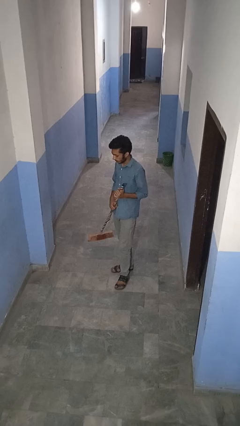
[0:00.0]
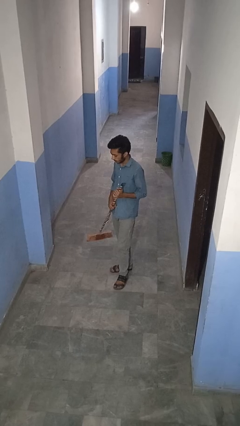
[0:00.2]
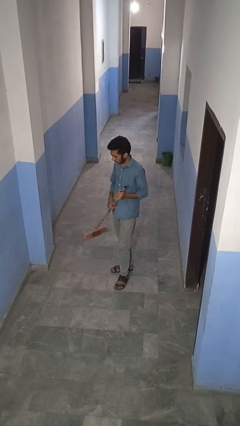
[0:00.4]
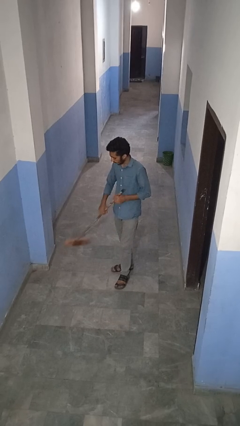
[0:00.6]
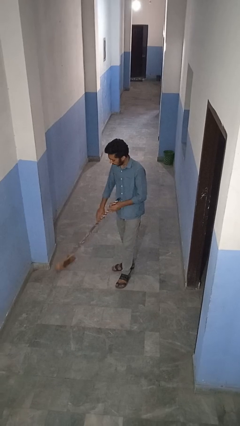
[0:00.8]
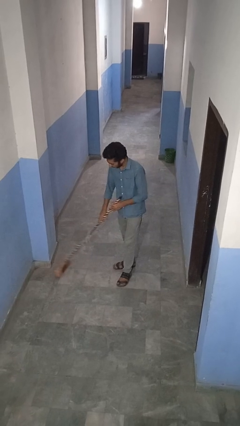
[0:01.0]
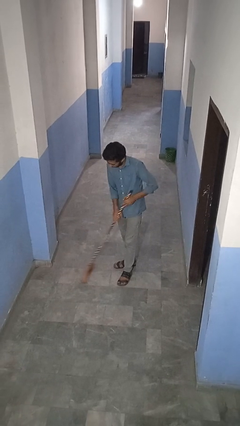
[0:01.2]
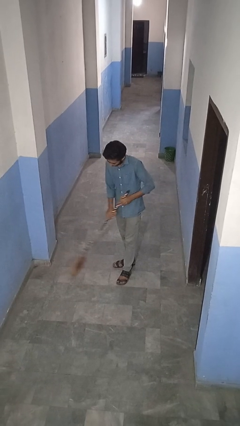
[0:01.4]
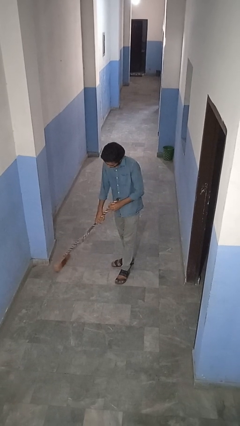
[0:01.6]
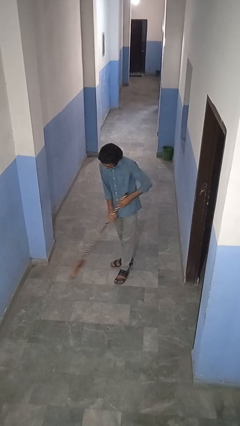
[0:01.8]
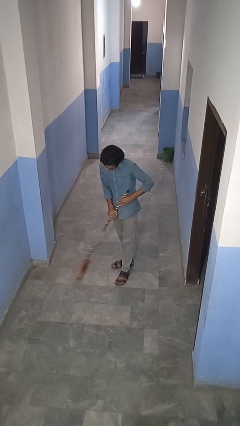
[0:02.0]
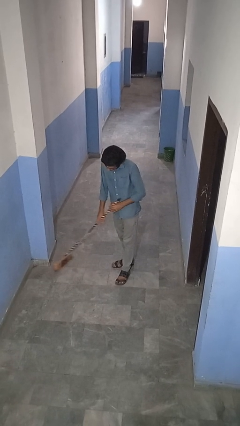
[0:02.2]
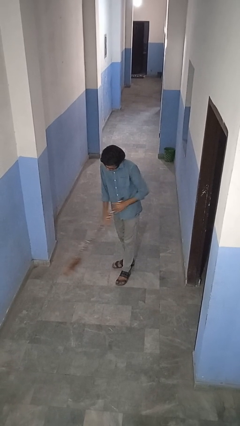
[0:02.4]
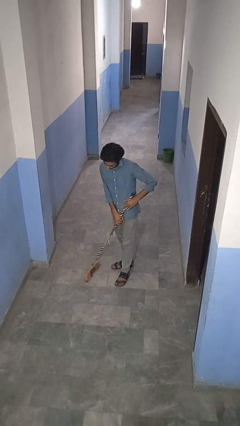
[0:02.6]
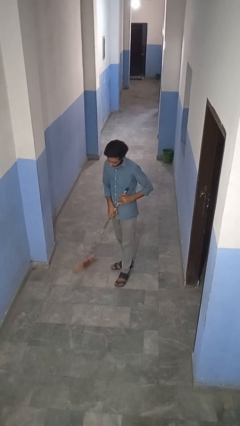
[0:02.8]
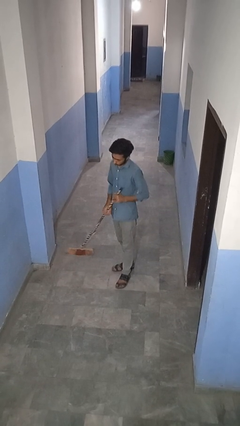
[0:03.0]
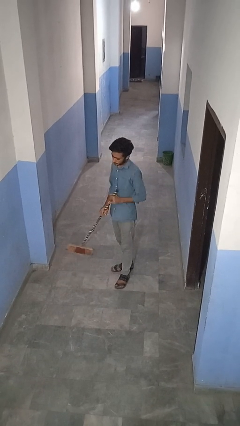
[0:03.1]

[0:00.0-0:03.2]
person sweeps floor

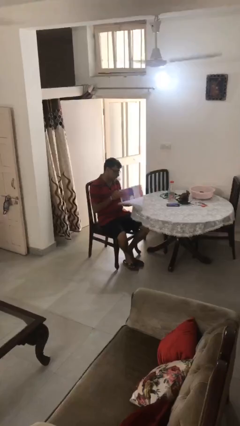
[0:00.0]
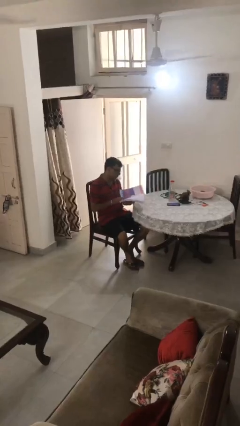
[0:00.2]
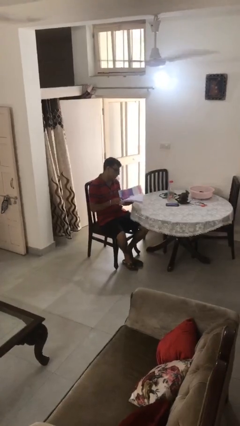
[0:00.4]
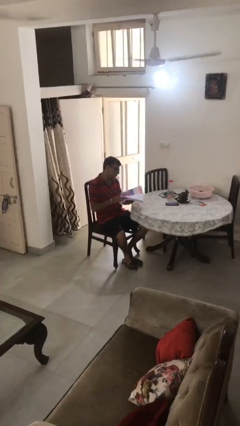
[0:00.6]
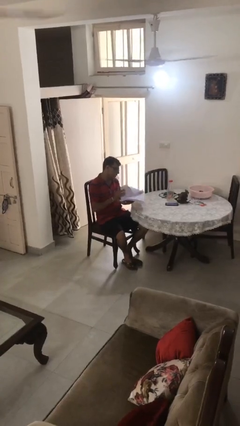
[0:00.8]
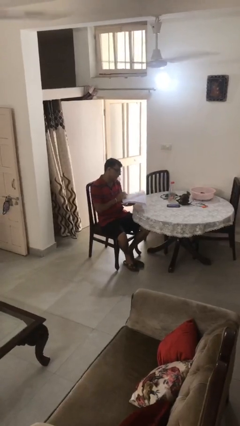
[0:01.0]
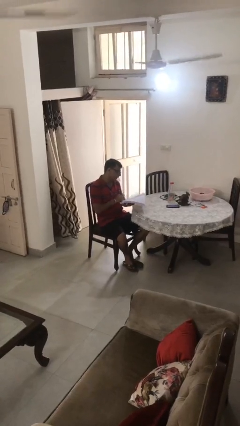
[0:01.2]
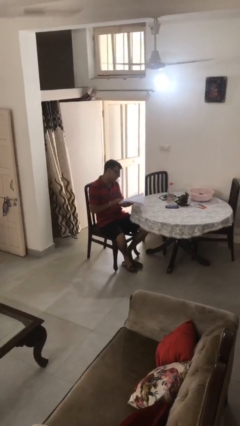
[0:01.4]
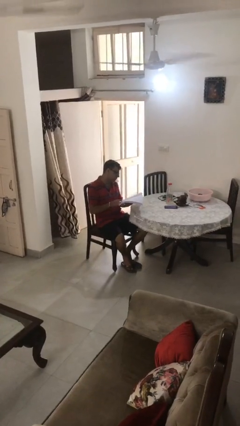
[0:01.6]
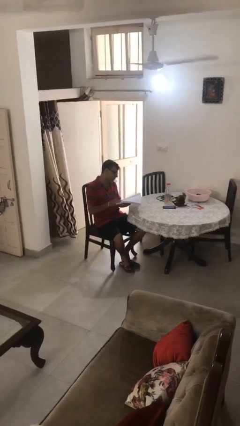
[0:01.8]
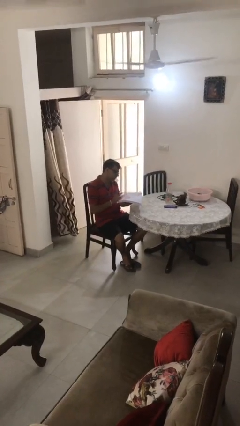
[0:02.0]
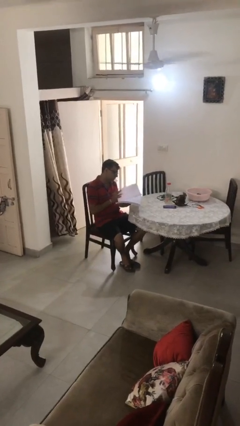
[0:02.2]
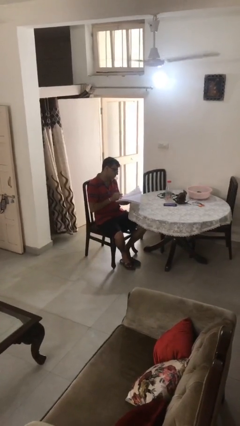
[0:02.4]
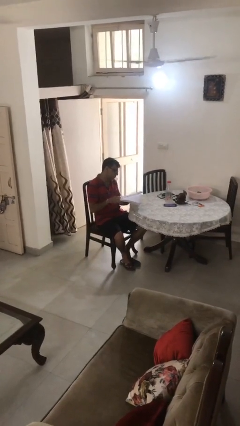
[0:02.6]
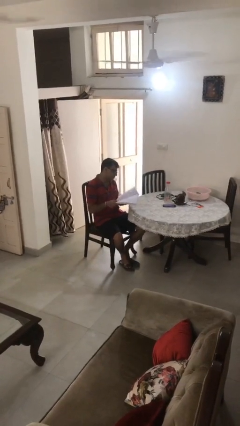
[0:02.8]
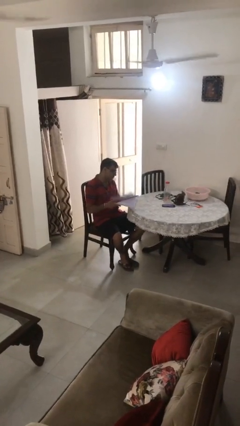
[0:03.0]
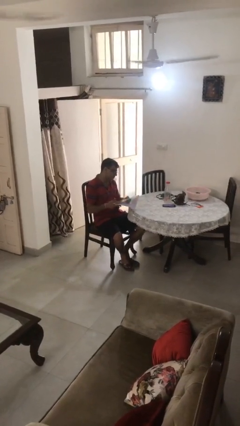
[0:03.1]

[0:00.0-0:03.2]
person reads document

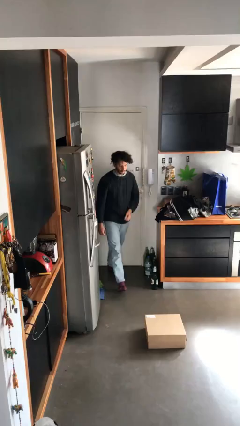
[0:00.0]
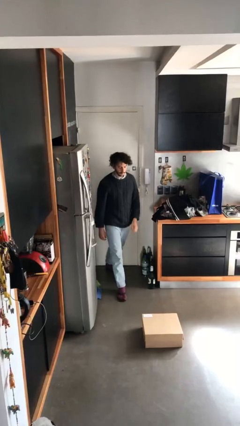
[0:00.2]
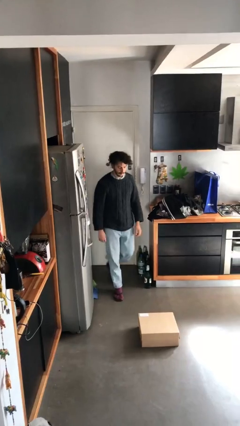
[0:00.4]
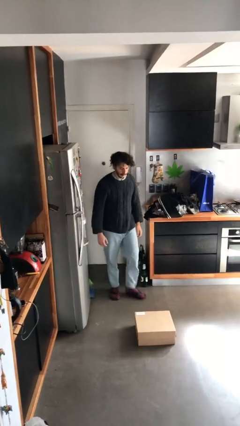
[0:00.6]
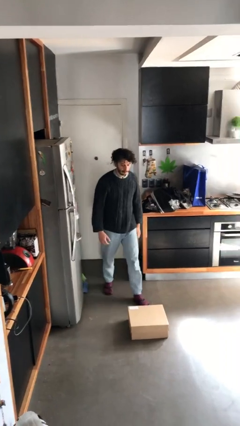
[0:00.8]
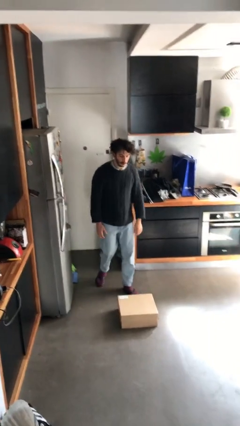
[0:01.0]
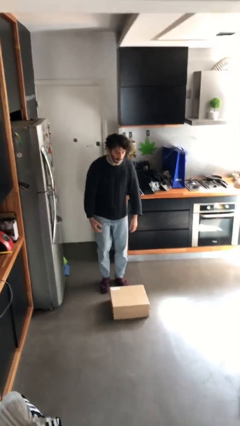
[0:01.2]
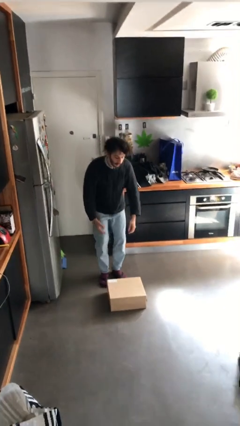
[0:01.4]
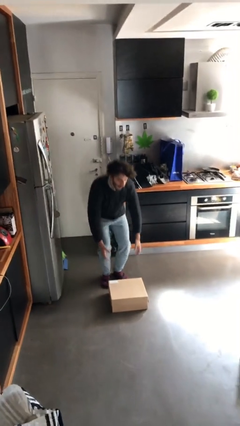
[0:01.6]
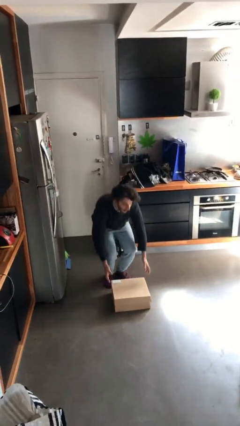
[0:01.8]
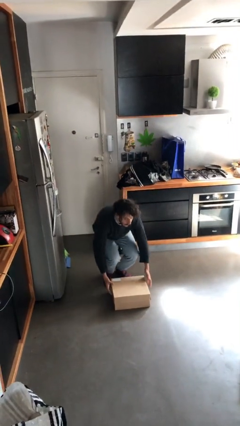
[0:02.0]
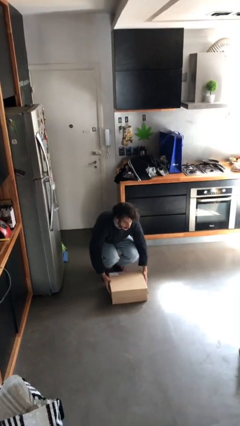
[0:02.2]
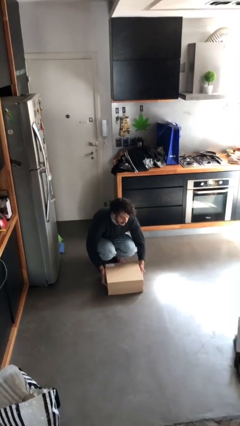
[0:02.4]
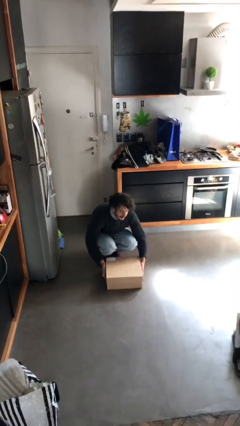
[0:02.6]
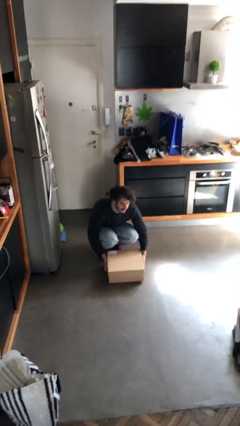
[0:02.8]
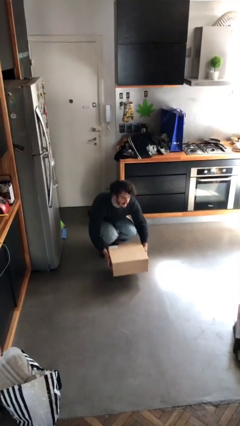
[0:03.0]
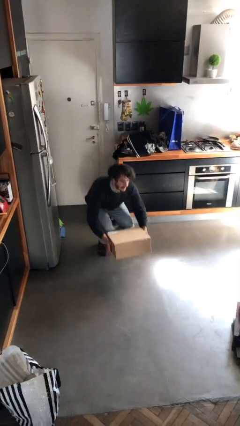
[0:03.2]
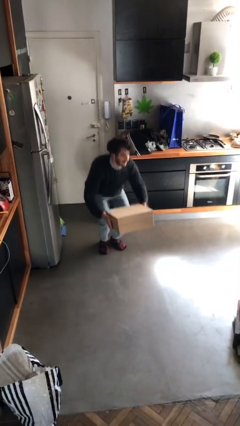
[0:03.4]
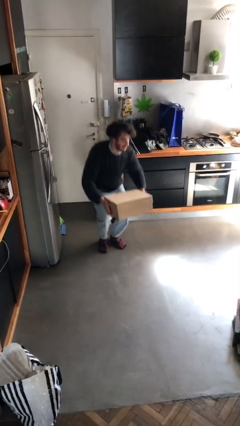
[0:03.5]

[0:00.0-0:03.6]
person picks up object from floor

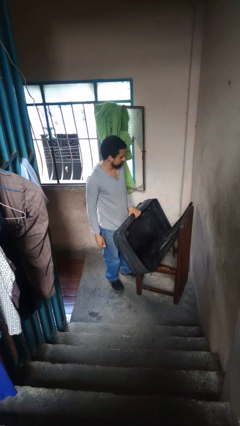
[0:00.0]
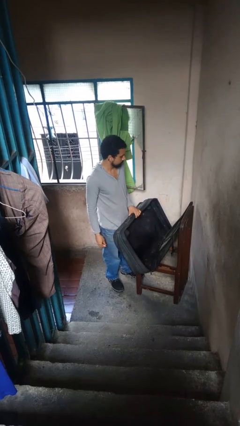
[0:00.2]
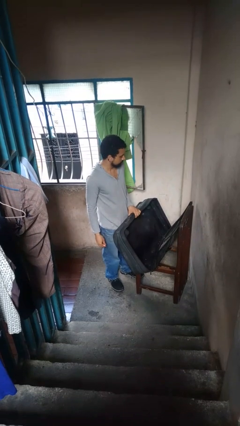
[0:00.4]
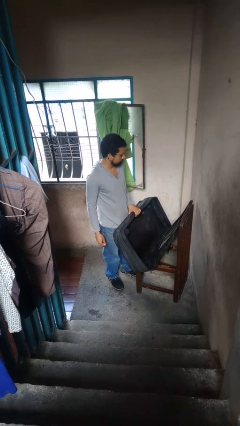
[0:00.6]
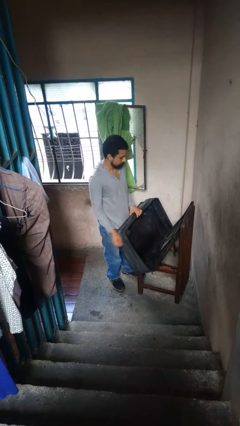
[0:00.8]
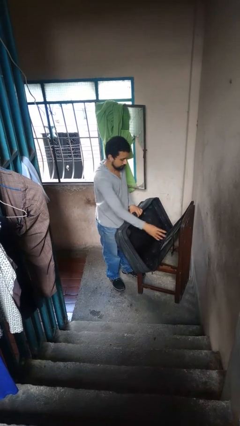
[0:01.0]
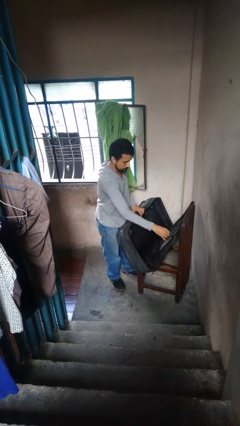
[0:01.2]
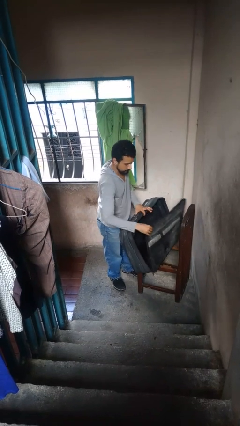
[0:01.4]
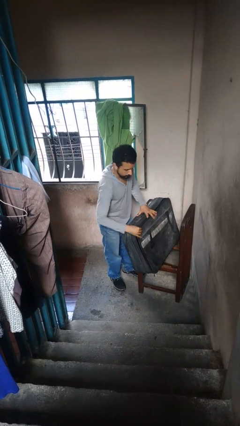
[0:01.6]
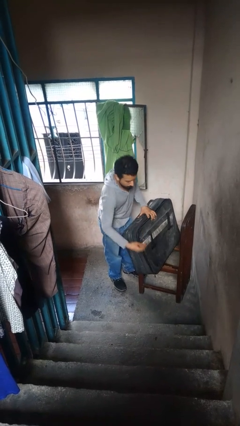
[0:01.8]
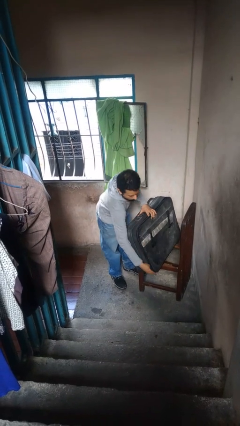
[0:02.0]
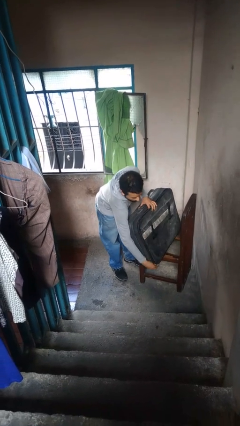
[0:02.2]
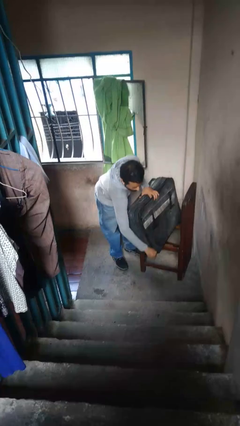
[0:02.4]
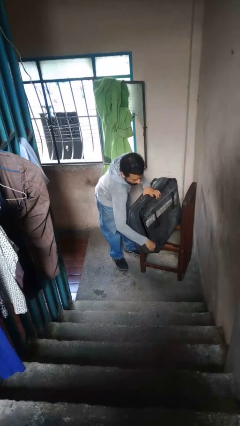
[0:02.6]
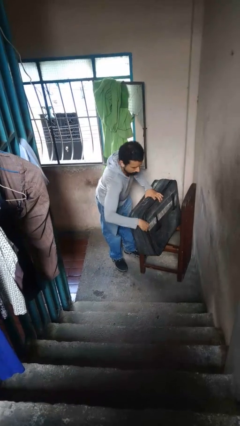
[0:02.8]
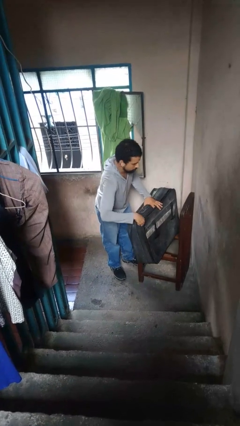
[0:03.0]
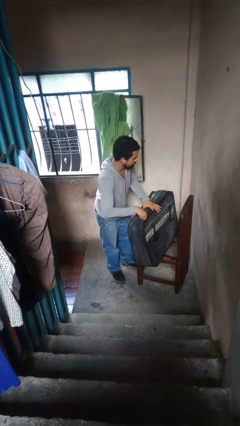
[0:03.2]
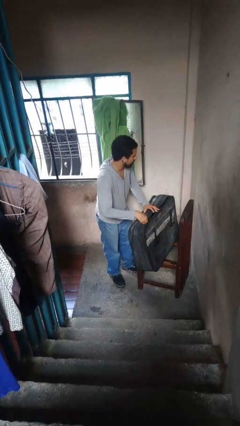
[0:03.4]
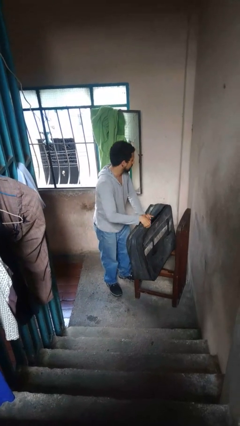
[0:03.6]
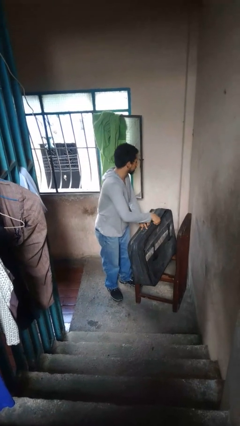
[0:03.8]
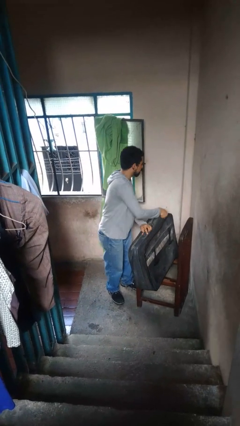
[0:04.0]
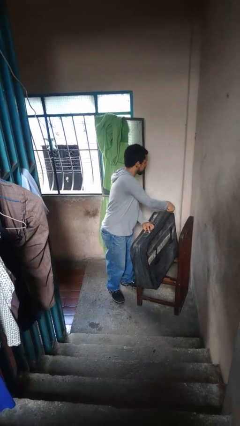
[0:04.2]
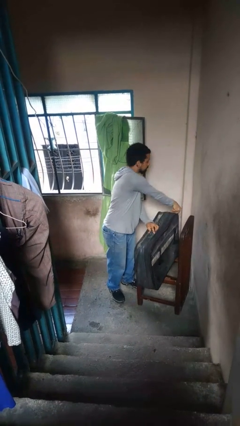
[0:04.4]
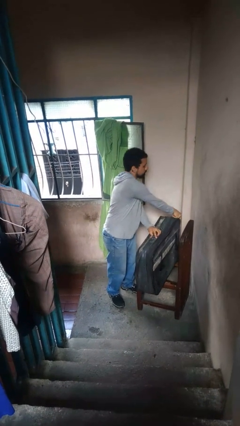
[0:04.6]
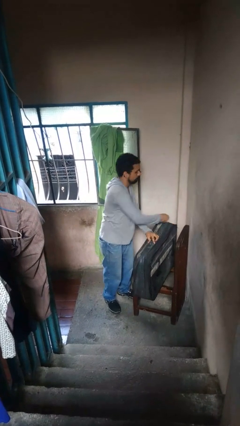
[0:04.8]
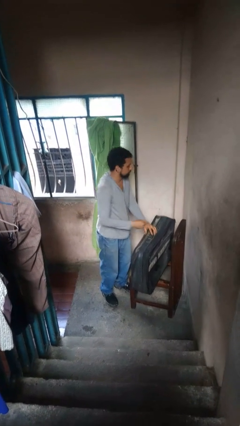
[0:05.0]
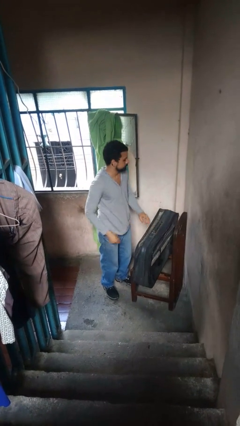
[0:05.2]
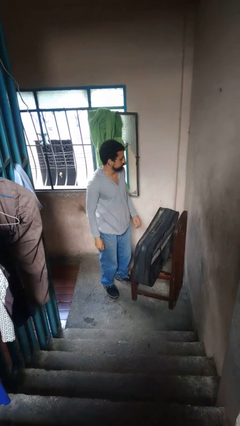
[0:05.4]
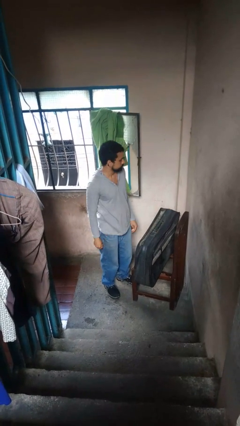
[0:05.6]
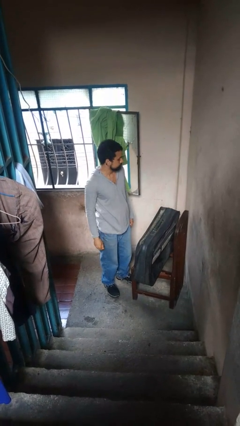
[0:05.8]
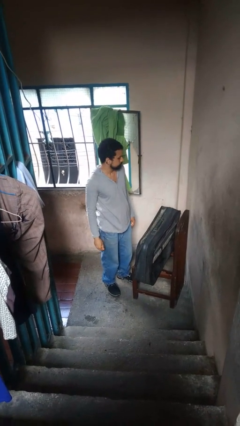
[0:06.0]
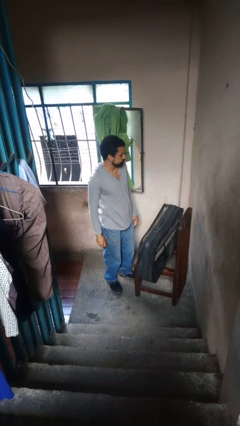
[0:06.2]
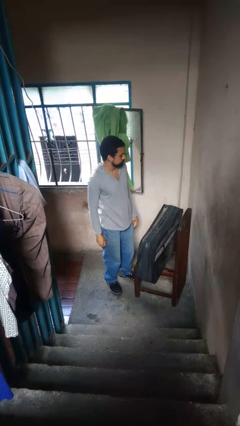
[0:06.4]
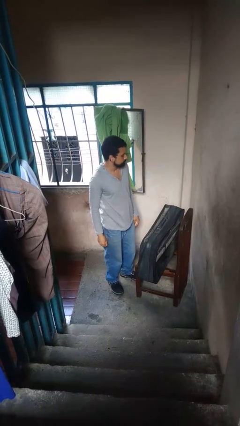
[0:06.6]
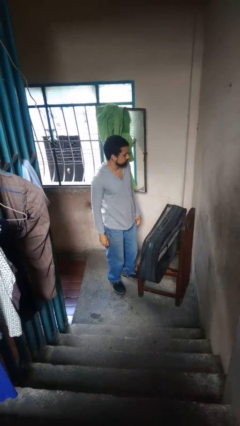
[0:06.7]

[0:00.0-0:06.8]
person closes suitcase

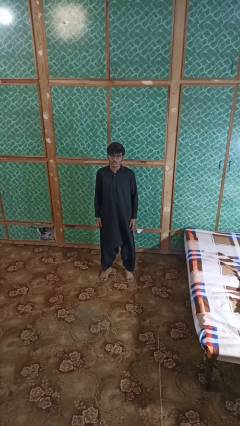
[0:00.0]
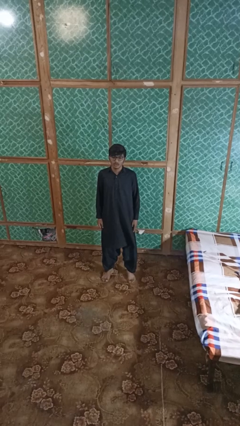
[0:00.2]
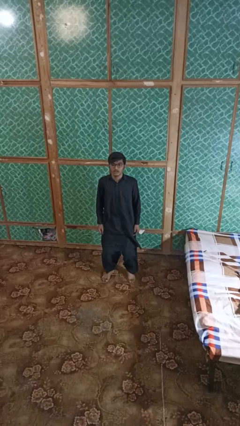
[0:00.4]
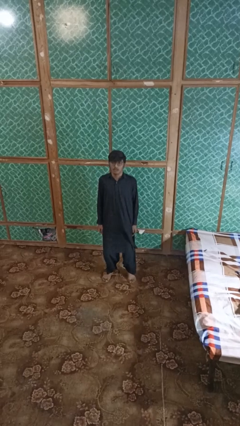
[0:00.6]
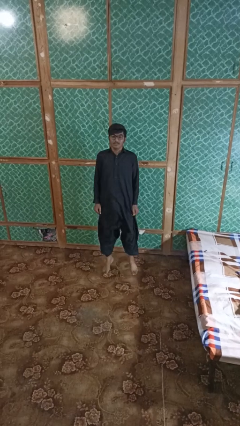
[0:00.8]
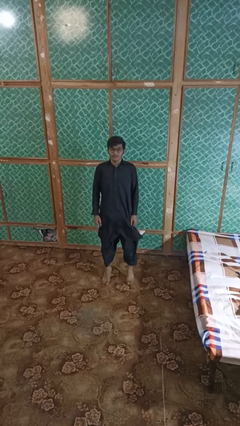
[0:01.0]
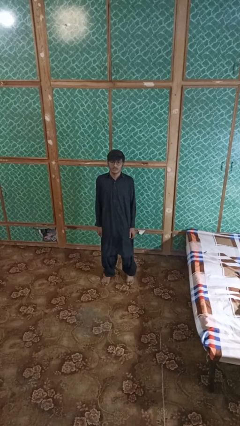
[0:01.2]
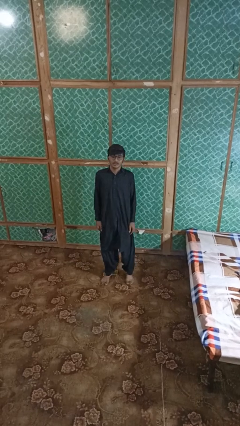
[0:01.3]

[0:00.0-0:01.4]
person jumps
